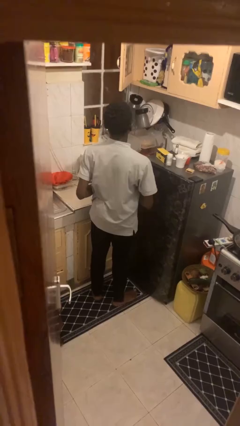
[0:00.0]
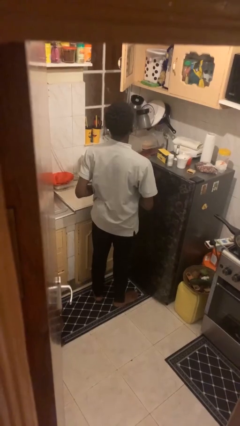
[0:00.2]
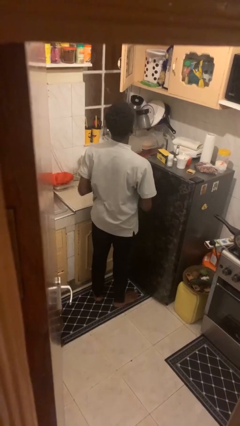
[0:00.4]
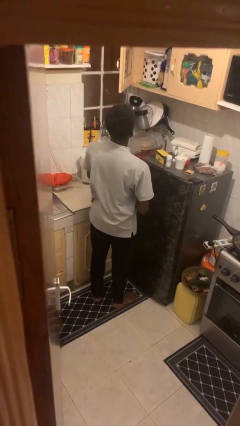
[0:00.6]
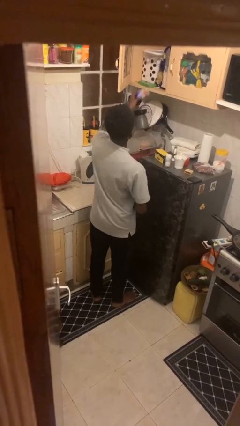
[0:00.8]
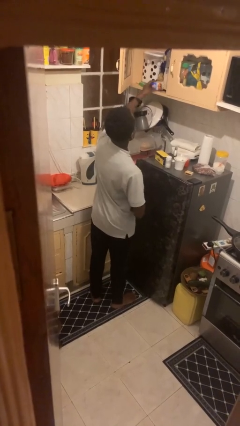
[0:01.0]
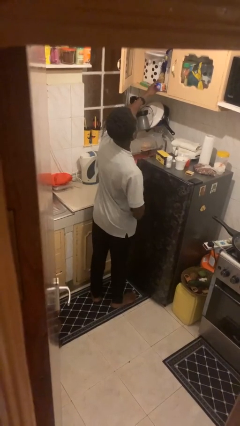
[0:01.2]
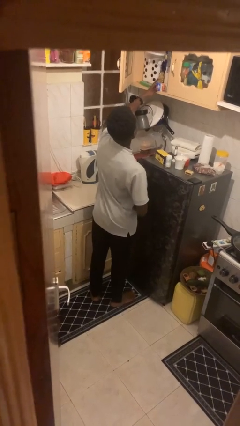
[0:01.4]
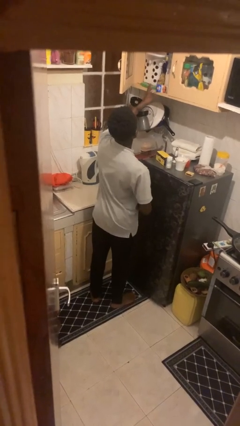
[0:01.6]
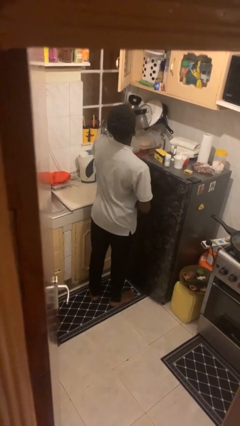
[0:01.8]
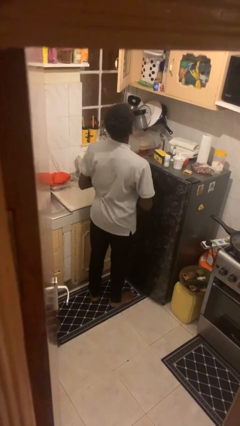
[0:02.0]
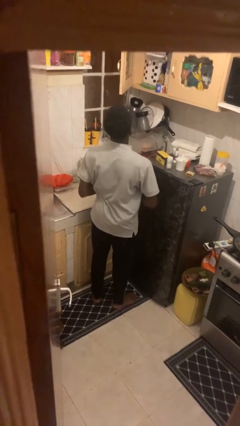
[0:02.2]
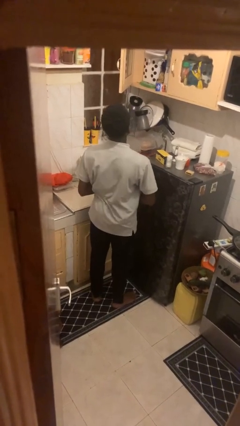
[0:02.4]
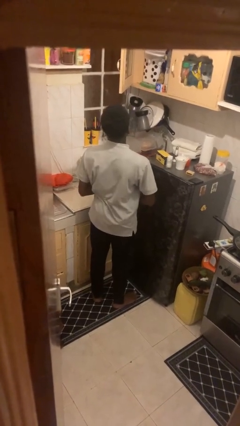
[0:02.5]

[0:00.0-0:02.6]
person puts down object into cabinet

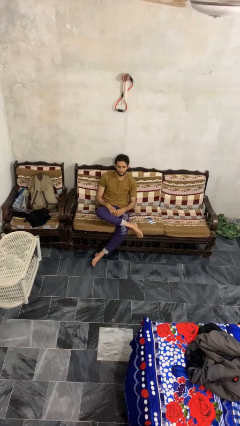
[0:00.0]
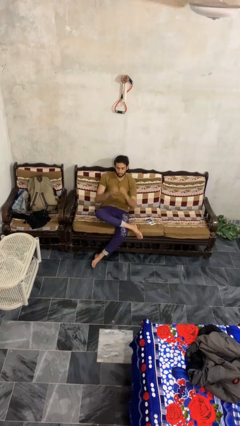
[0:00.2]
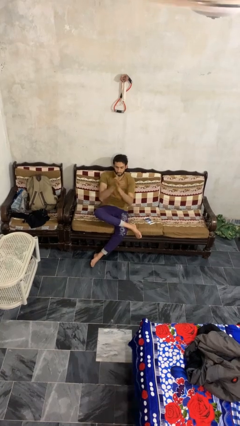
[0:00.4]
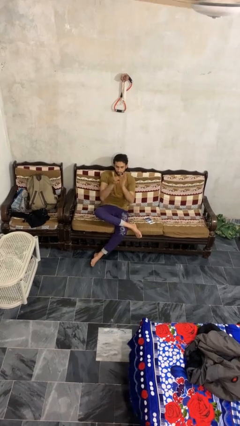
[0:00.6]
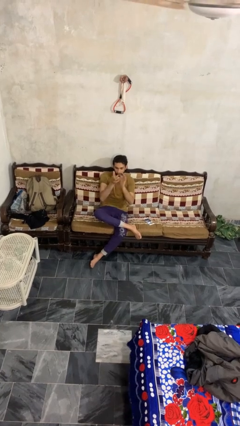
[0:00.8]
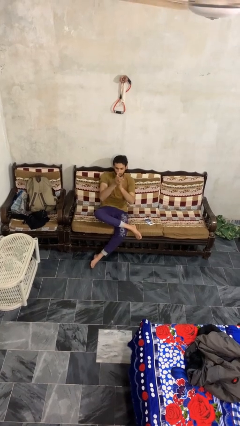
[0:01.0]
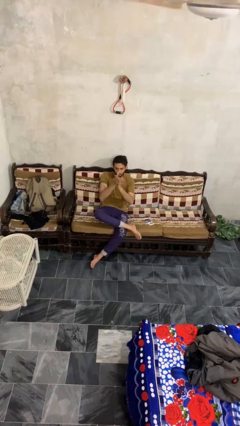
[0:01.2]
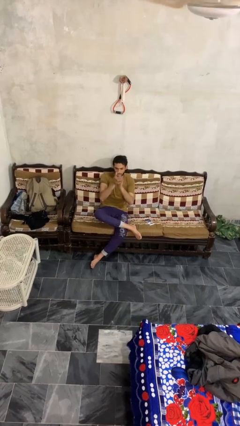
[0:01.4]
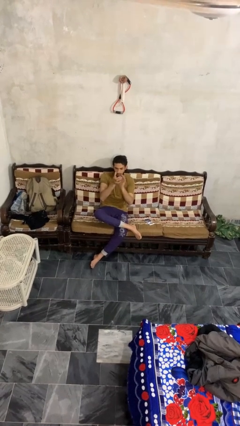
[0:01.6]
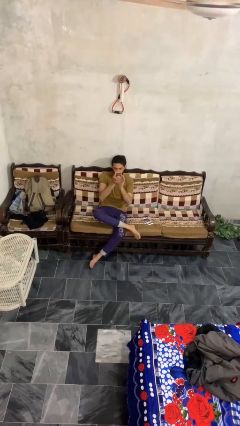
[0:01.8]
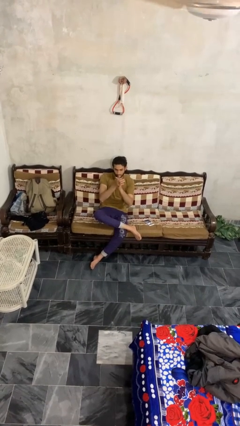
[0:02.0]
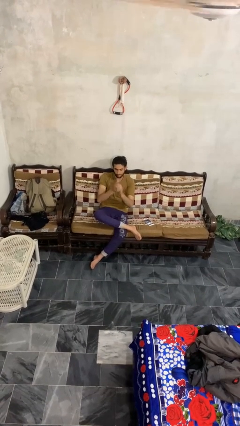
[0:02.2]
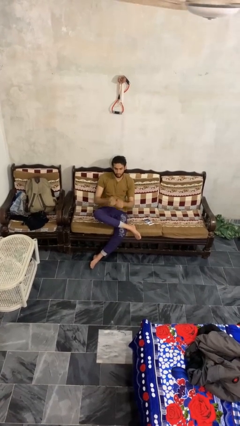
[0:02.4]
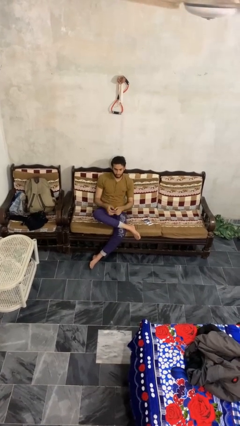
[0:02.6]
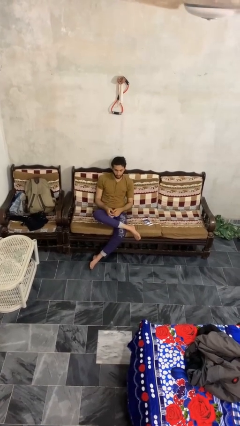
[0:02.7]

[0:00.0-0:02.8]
person claps hands

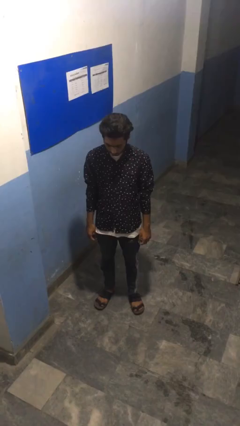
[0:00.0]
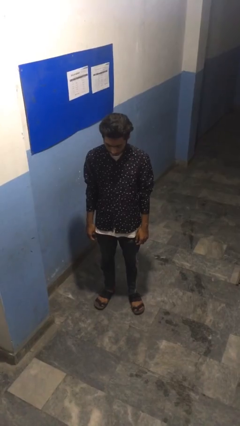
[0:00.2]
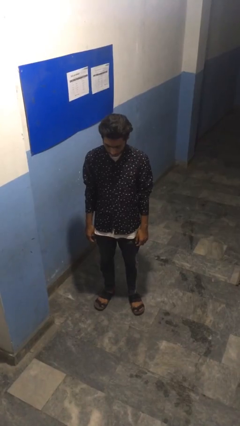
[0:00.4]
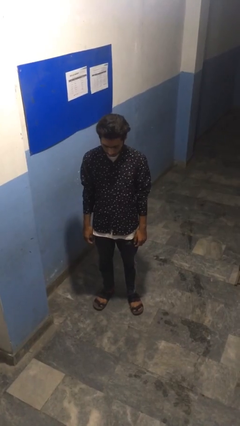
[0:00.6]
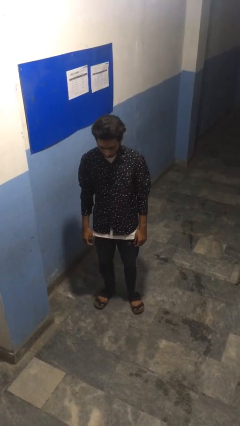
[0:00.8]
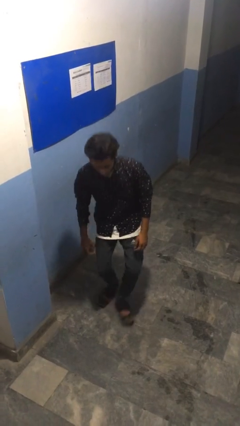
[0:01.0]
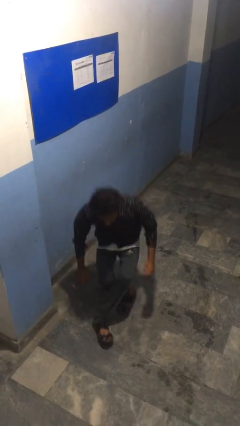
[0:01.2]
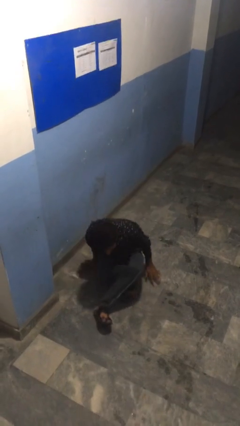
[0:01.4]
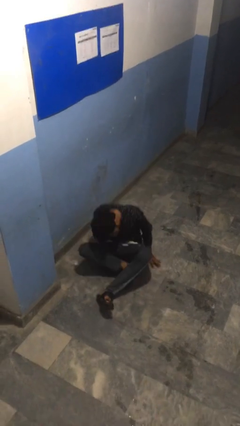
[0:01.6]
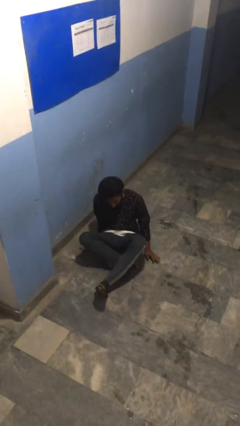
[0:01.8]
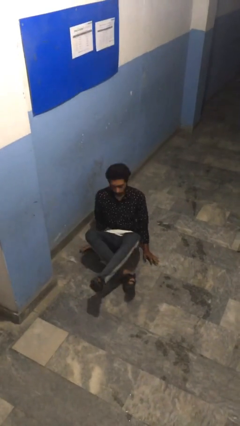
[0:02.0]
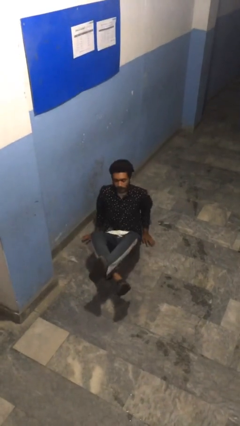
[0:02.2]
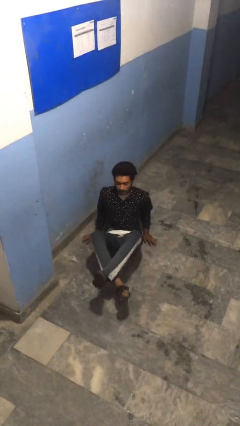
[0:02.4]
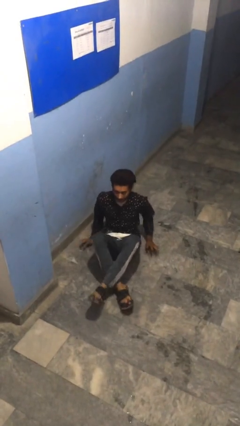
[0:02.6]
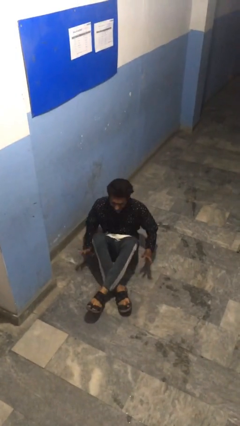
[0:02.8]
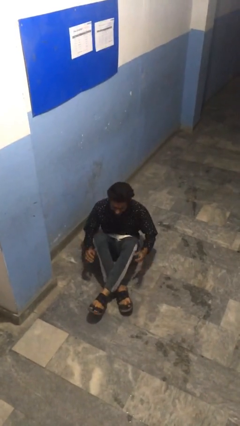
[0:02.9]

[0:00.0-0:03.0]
person falls while standing

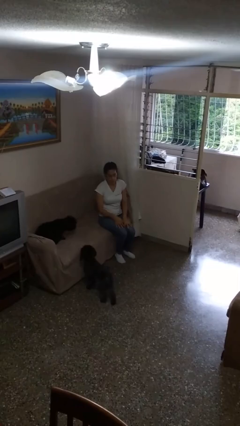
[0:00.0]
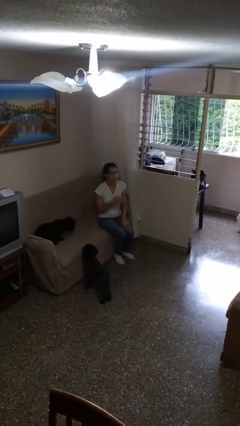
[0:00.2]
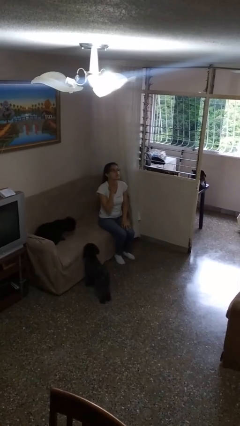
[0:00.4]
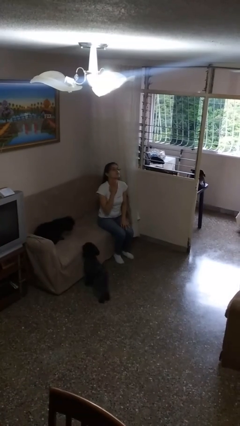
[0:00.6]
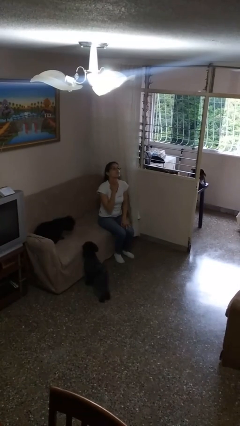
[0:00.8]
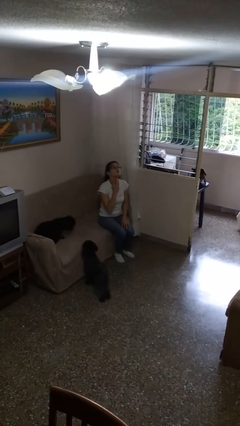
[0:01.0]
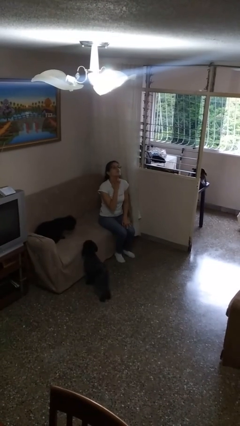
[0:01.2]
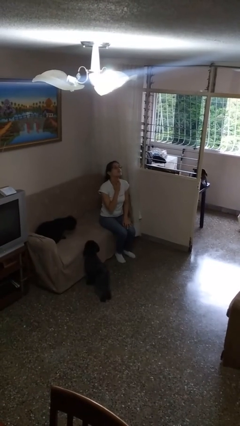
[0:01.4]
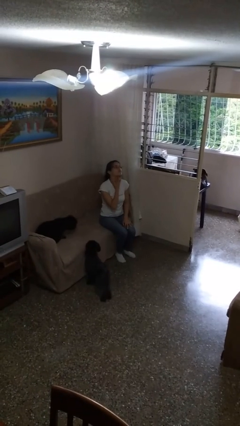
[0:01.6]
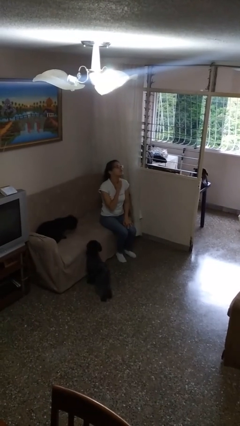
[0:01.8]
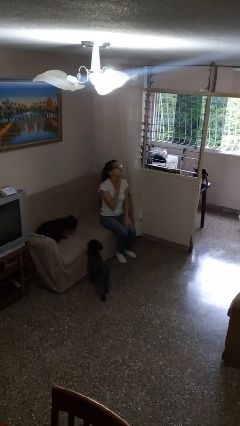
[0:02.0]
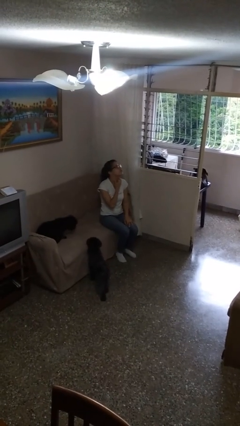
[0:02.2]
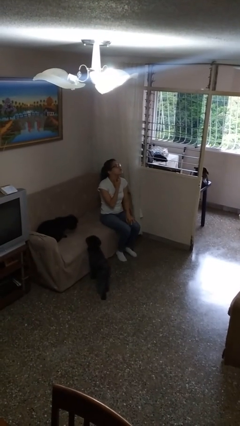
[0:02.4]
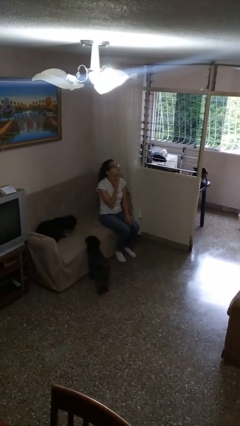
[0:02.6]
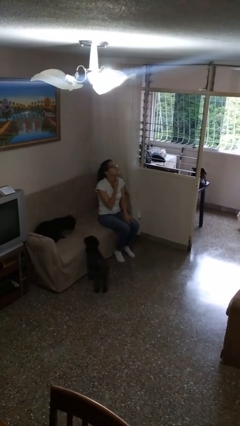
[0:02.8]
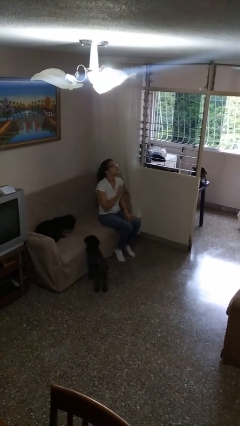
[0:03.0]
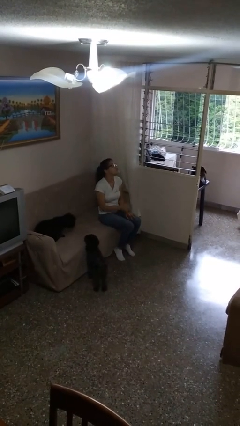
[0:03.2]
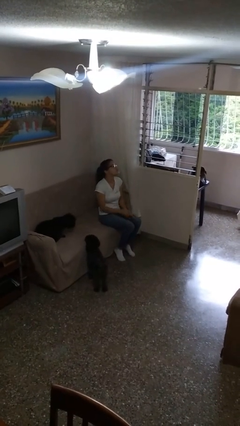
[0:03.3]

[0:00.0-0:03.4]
person scratches face

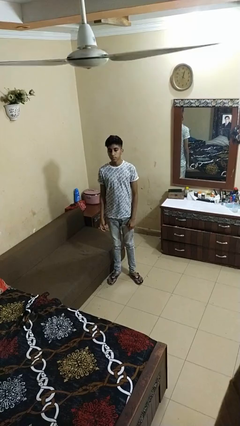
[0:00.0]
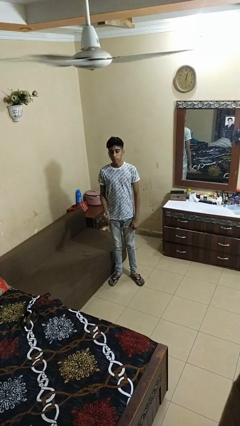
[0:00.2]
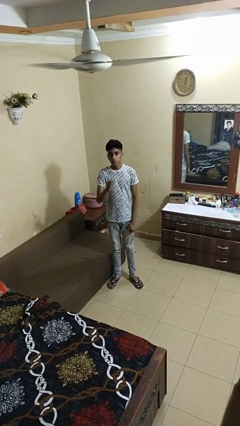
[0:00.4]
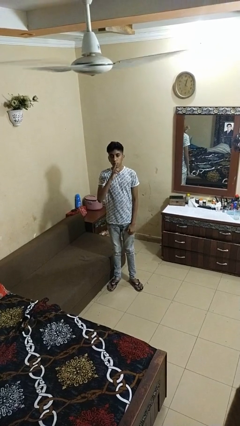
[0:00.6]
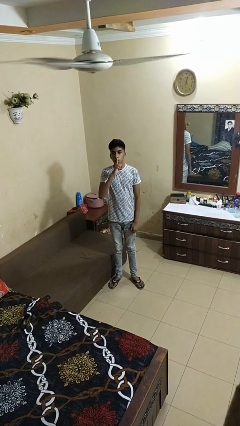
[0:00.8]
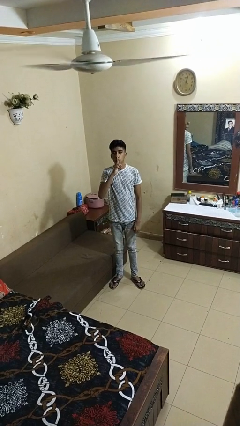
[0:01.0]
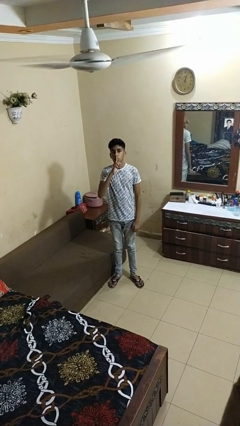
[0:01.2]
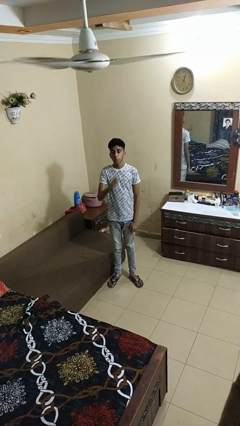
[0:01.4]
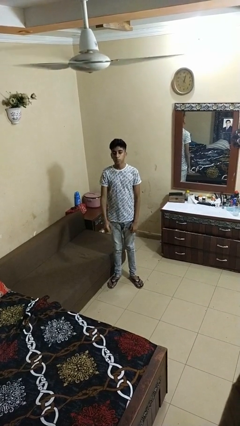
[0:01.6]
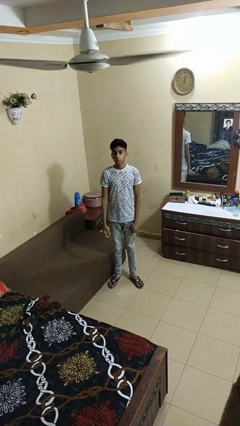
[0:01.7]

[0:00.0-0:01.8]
person gestures be quiet

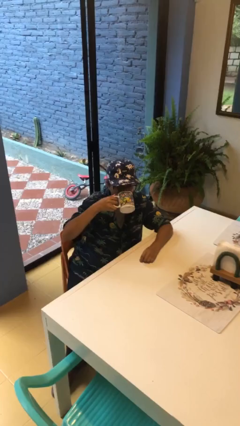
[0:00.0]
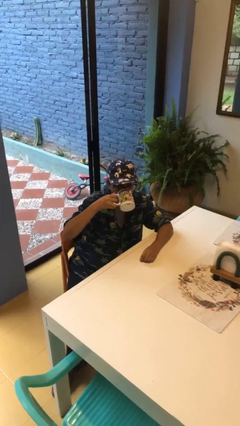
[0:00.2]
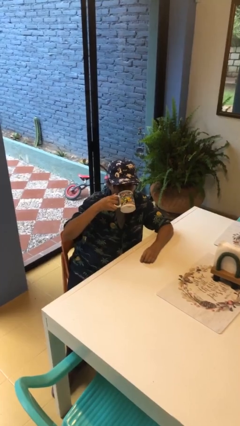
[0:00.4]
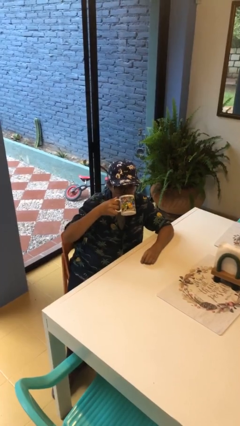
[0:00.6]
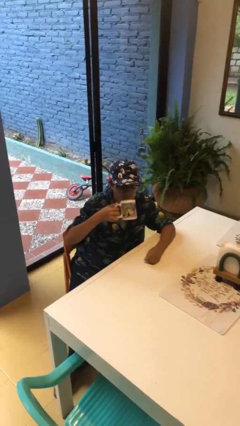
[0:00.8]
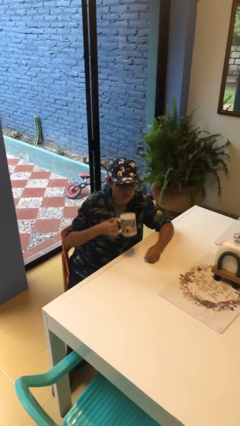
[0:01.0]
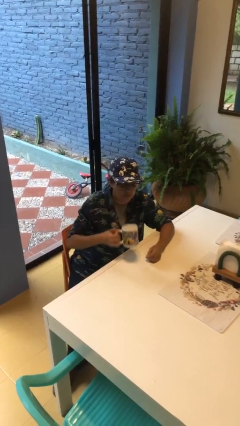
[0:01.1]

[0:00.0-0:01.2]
person drinks from mug

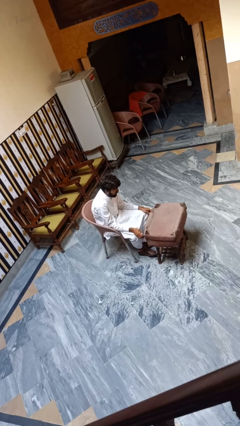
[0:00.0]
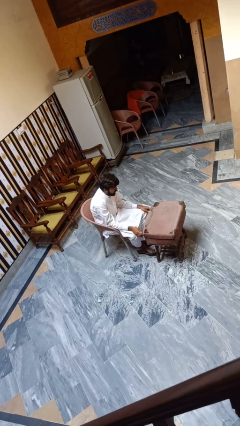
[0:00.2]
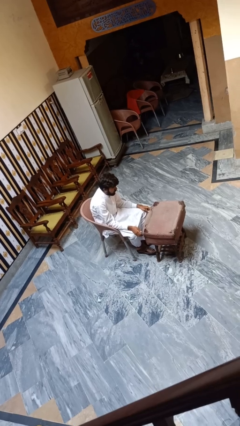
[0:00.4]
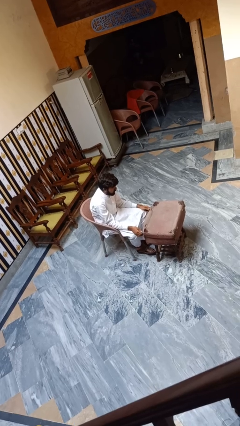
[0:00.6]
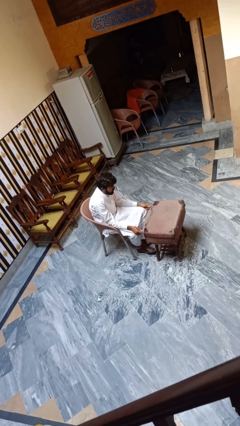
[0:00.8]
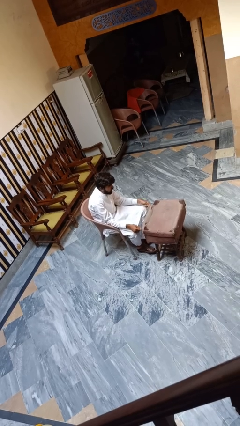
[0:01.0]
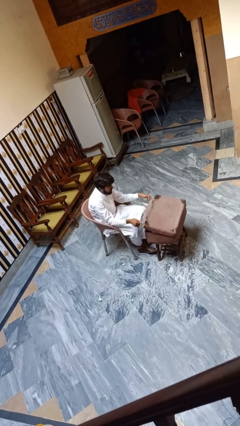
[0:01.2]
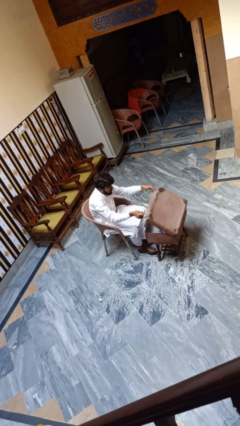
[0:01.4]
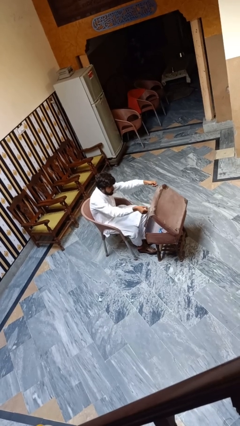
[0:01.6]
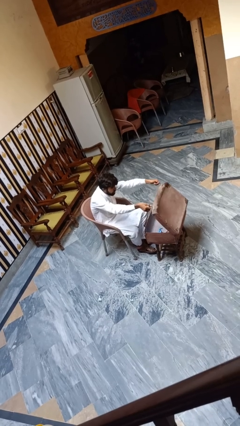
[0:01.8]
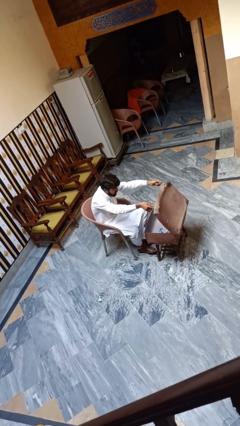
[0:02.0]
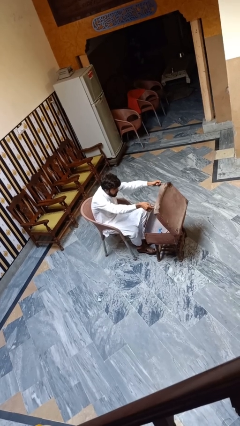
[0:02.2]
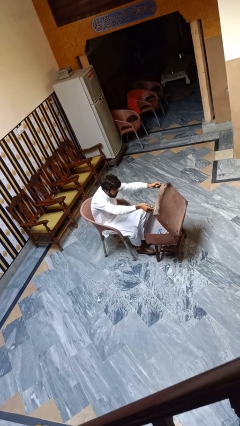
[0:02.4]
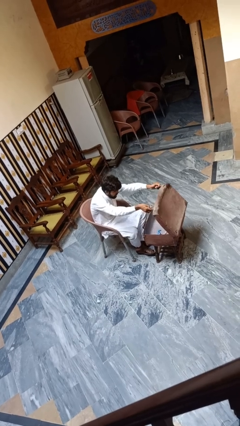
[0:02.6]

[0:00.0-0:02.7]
person opens suitcase
